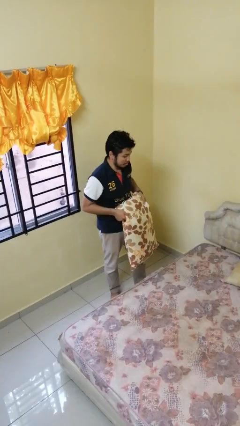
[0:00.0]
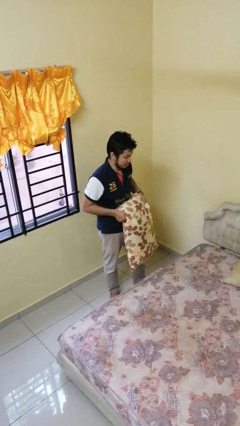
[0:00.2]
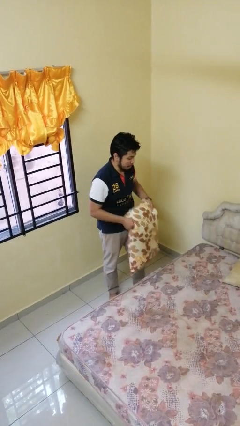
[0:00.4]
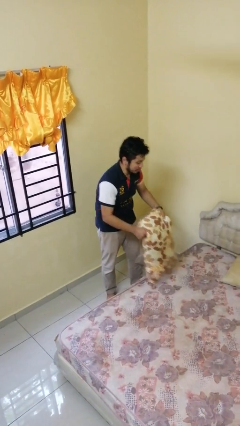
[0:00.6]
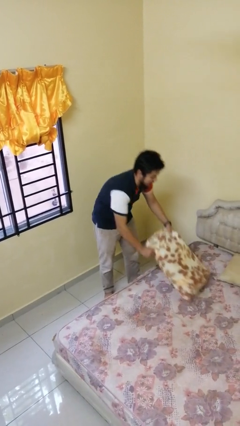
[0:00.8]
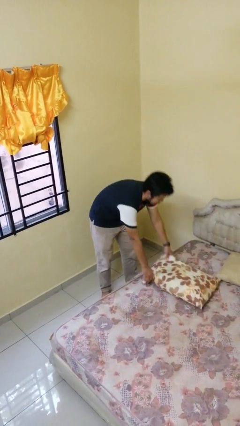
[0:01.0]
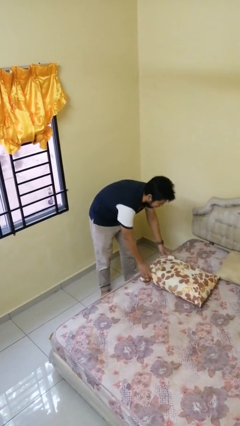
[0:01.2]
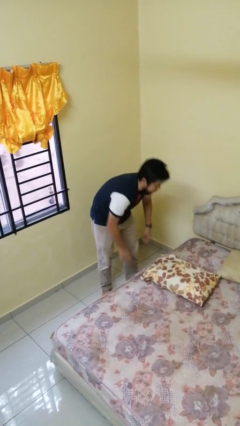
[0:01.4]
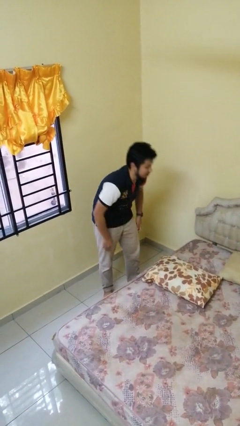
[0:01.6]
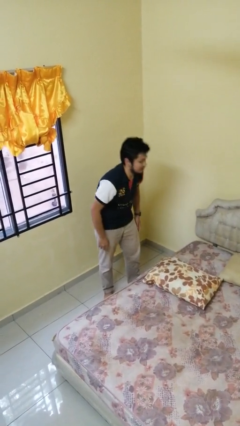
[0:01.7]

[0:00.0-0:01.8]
person puts down object on bed

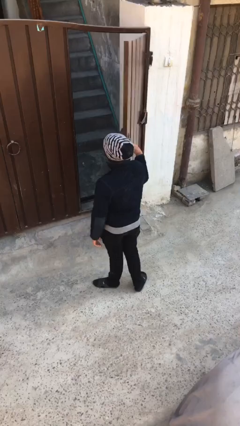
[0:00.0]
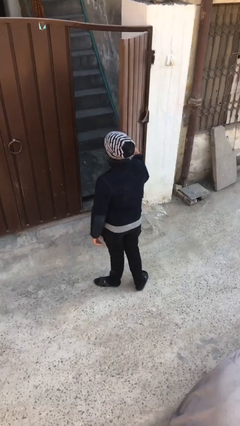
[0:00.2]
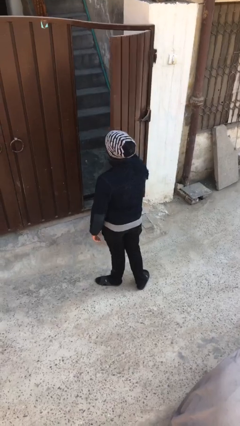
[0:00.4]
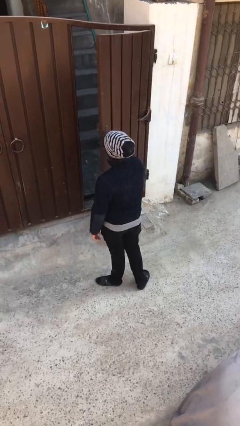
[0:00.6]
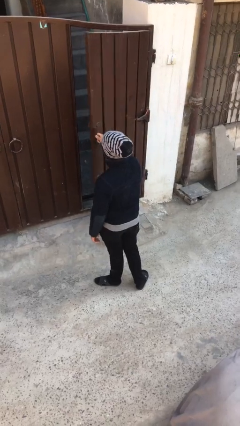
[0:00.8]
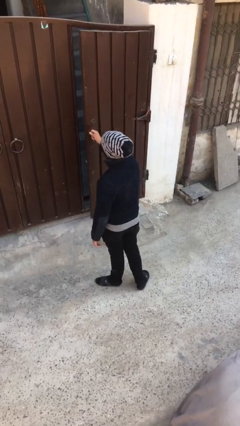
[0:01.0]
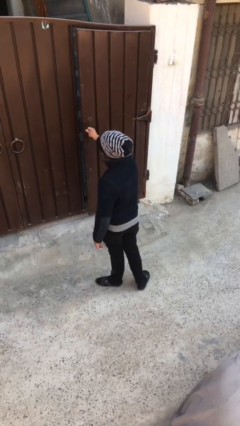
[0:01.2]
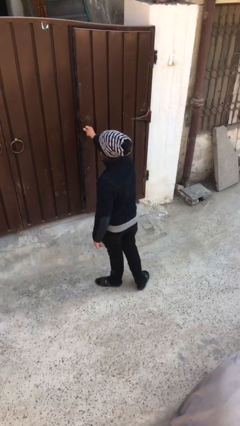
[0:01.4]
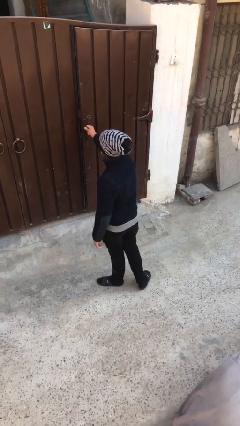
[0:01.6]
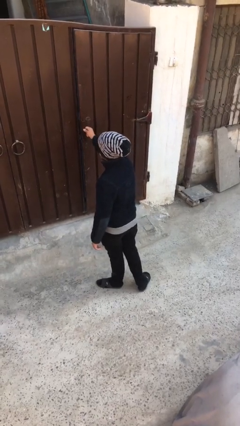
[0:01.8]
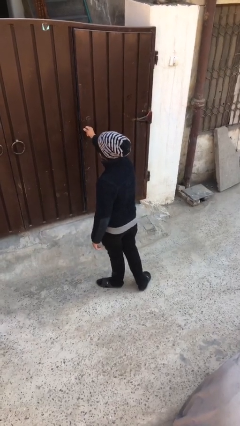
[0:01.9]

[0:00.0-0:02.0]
person closes facility door

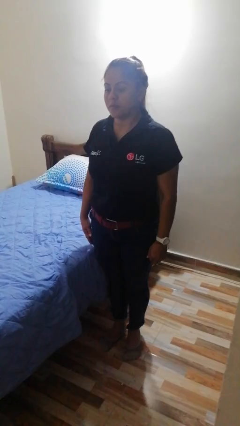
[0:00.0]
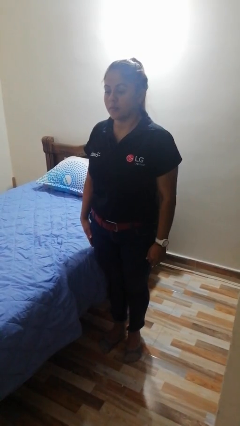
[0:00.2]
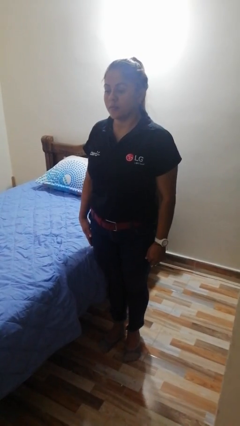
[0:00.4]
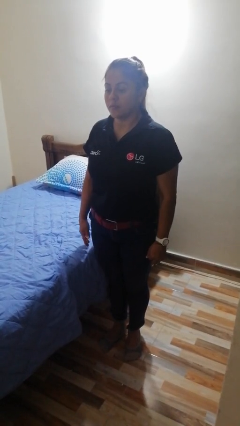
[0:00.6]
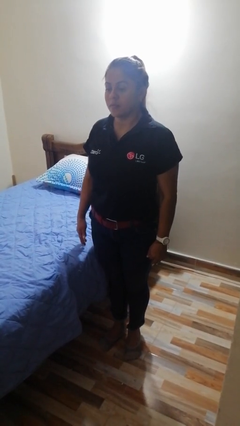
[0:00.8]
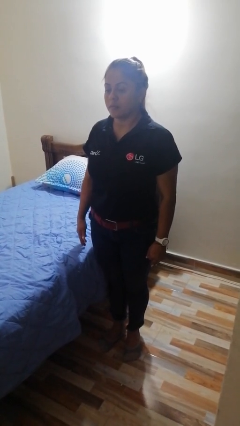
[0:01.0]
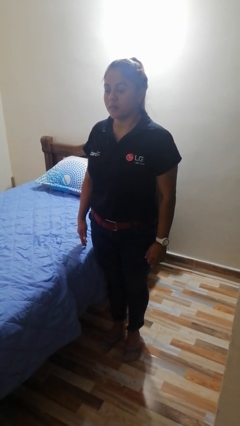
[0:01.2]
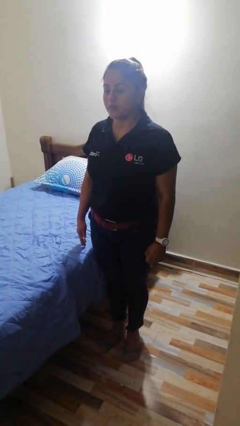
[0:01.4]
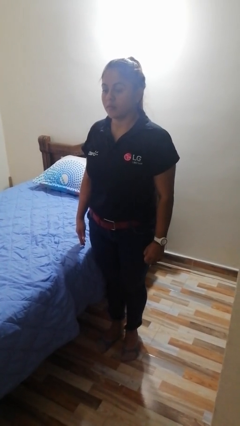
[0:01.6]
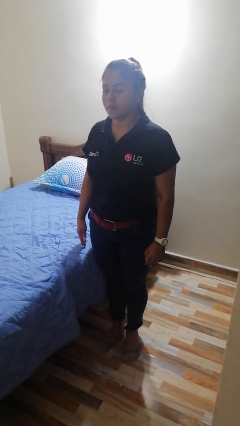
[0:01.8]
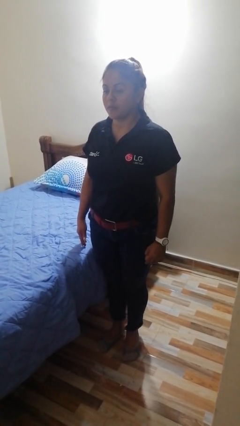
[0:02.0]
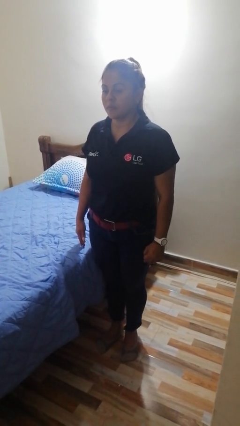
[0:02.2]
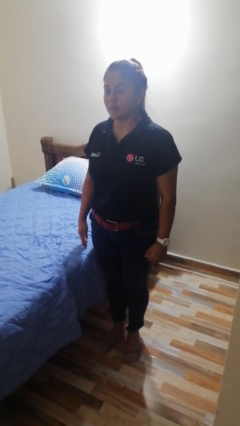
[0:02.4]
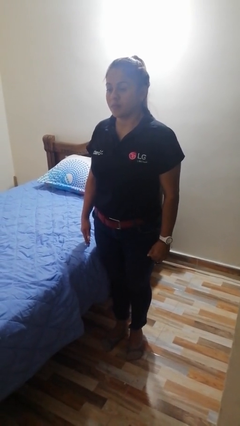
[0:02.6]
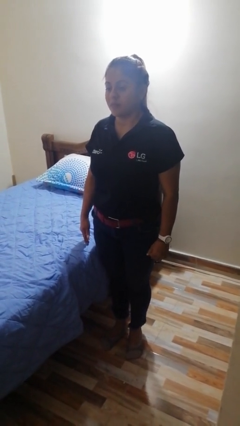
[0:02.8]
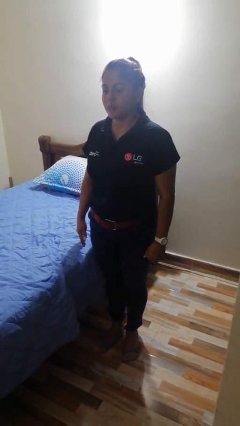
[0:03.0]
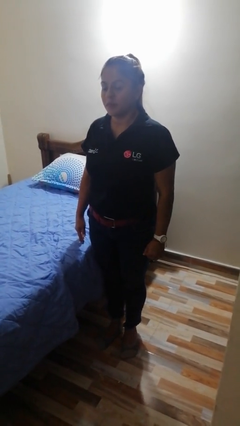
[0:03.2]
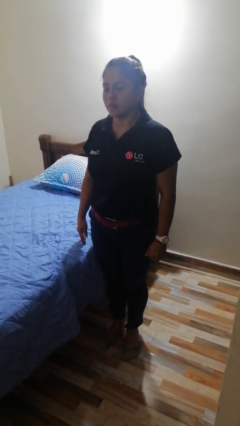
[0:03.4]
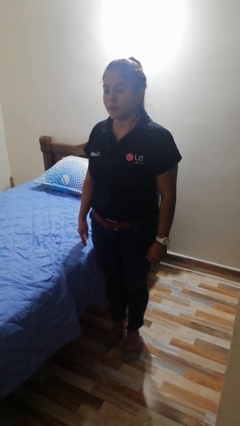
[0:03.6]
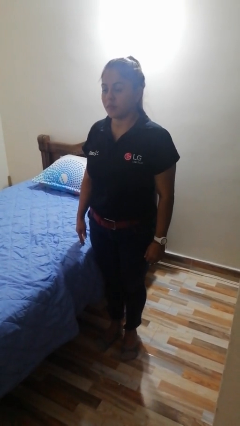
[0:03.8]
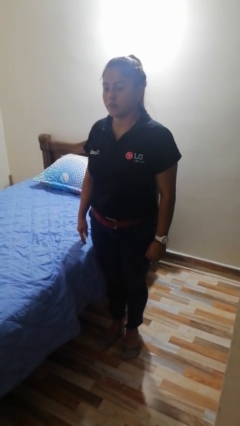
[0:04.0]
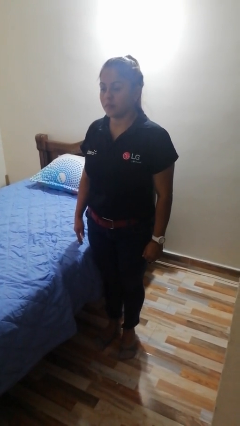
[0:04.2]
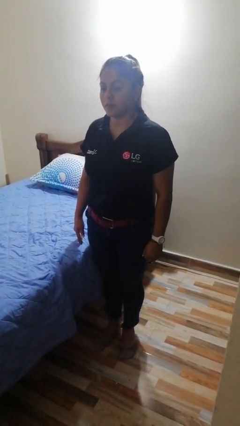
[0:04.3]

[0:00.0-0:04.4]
person stands up

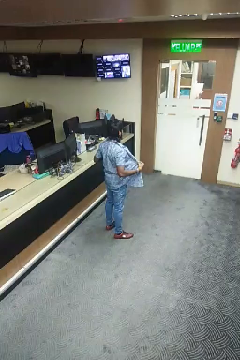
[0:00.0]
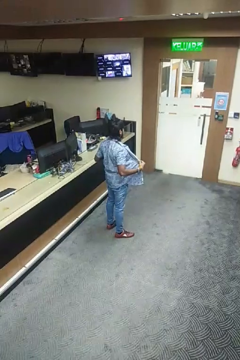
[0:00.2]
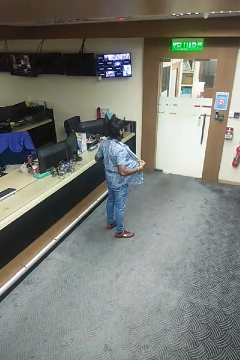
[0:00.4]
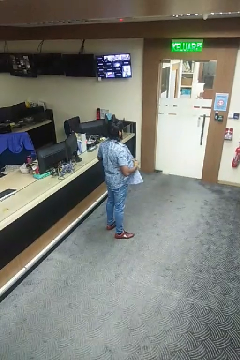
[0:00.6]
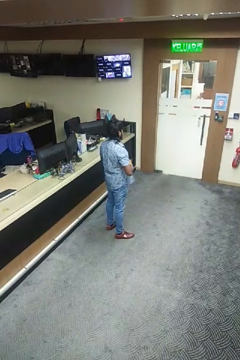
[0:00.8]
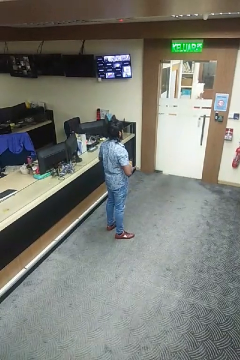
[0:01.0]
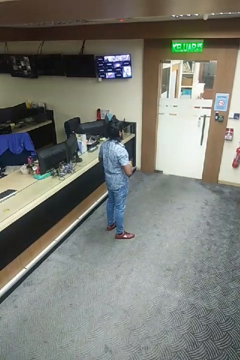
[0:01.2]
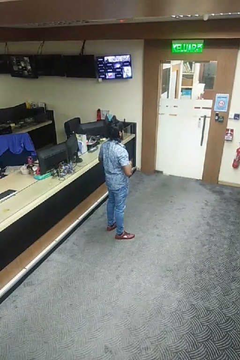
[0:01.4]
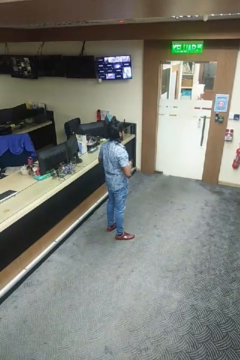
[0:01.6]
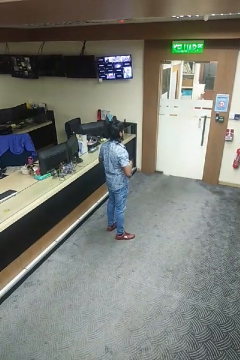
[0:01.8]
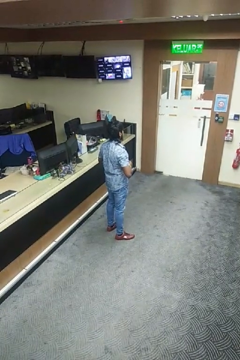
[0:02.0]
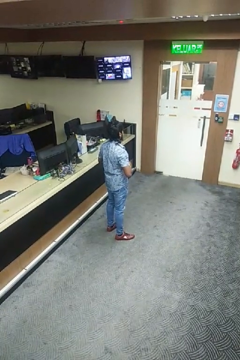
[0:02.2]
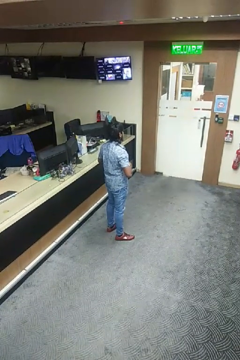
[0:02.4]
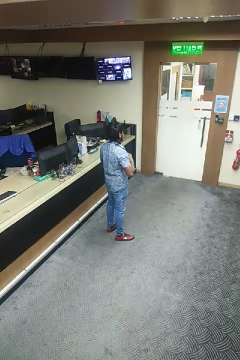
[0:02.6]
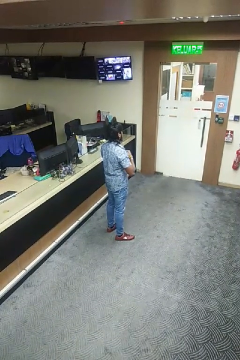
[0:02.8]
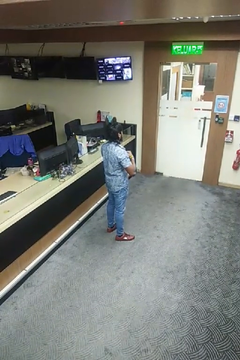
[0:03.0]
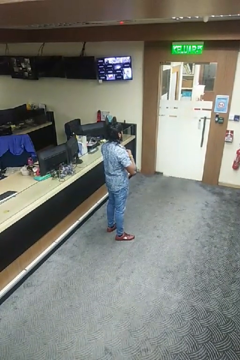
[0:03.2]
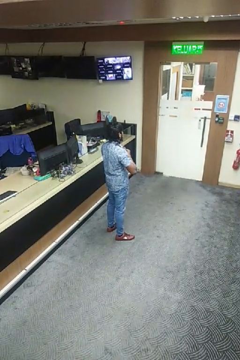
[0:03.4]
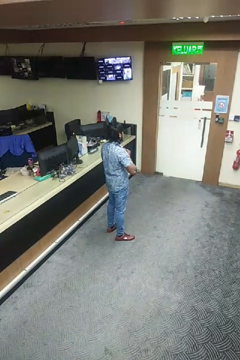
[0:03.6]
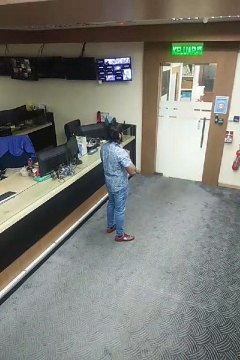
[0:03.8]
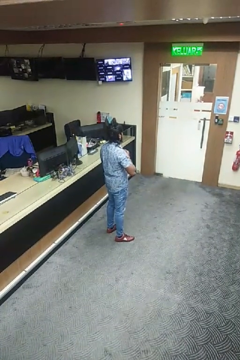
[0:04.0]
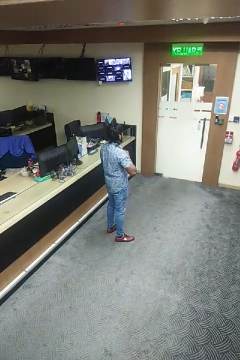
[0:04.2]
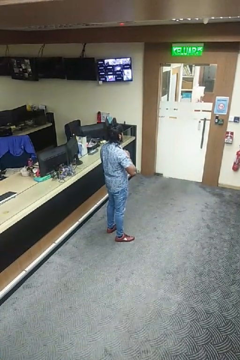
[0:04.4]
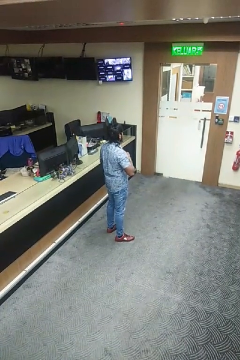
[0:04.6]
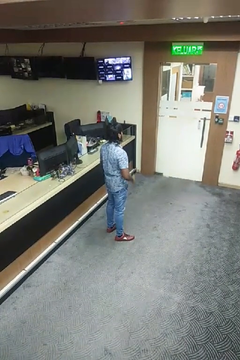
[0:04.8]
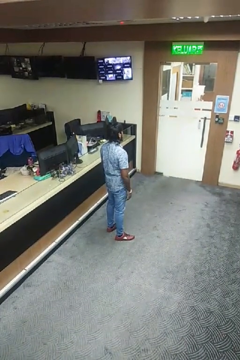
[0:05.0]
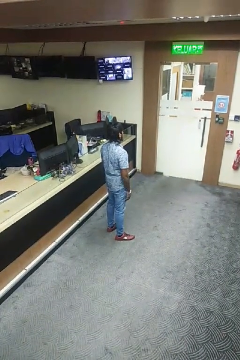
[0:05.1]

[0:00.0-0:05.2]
person buttons shirt

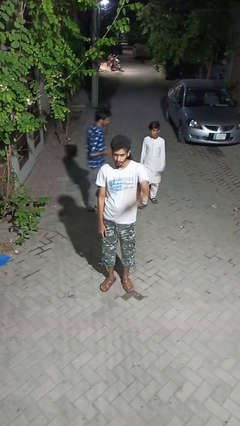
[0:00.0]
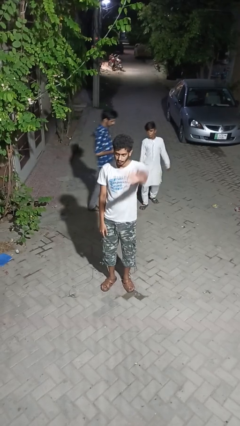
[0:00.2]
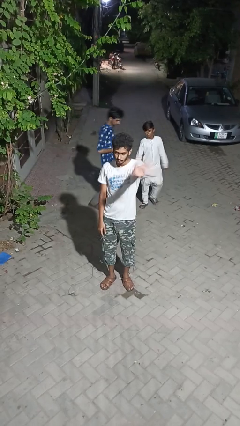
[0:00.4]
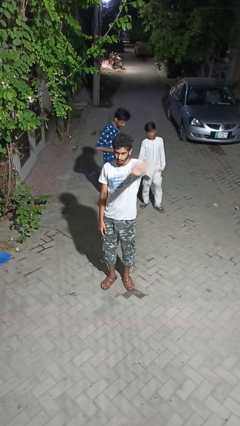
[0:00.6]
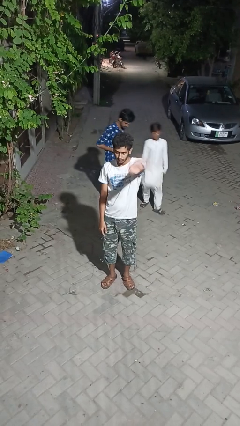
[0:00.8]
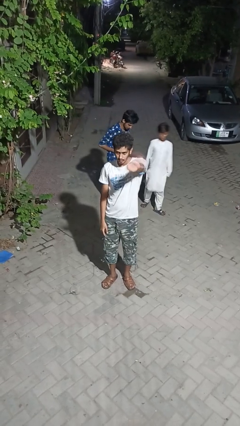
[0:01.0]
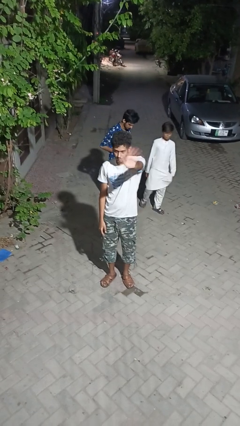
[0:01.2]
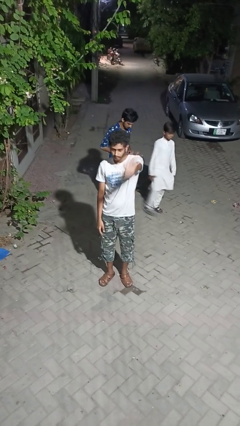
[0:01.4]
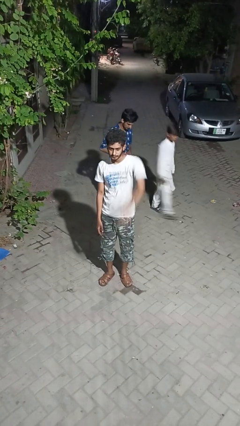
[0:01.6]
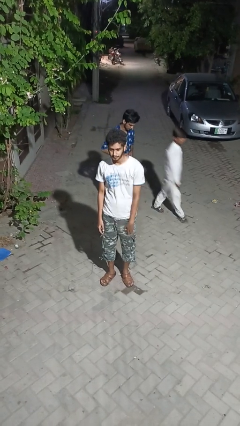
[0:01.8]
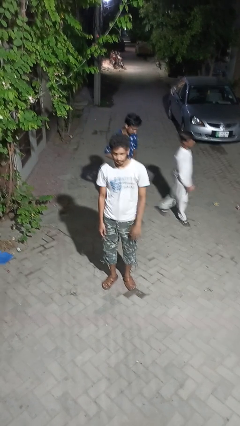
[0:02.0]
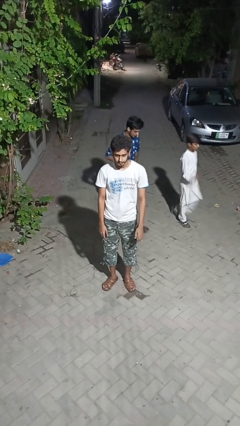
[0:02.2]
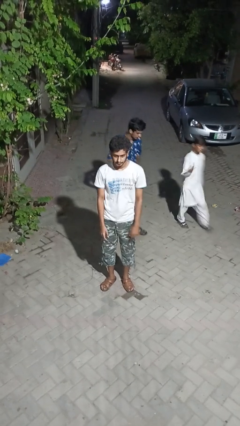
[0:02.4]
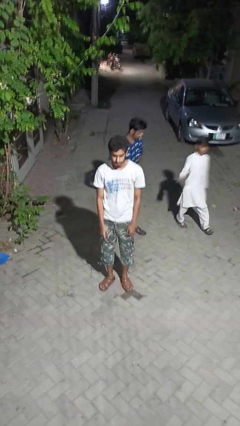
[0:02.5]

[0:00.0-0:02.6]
person waves at person

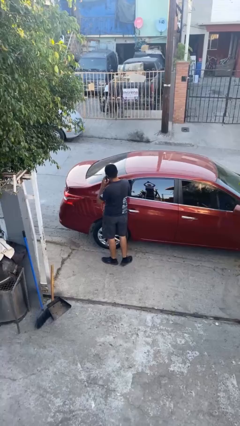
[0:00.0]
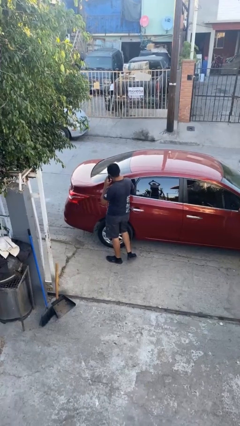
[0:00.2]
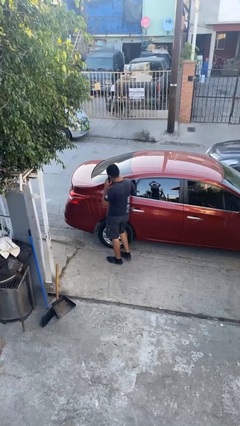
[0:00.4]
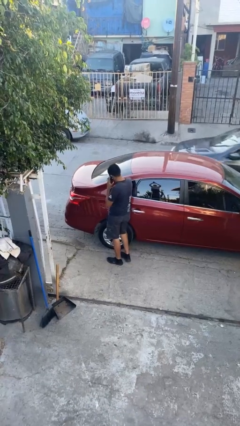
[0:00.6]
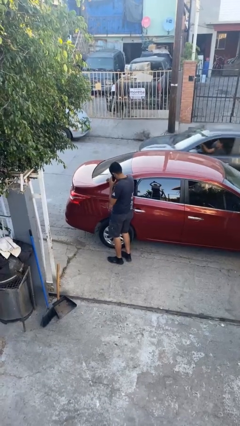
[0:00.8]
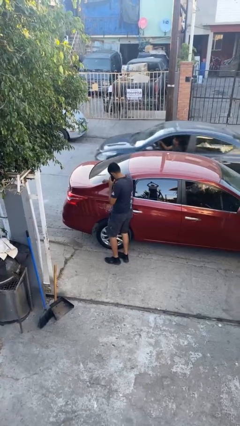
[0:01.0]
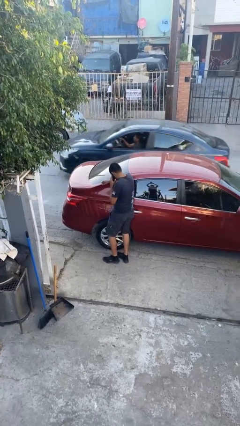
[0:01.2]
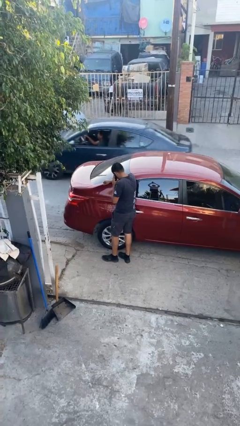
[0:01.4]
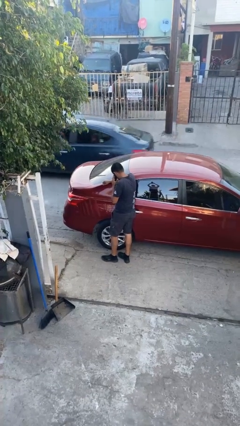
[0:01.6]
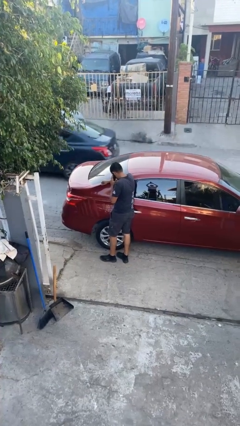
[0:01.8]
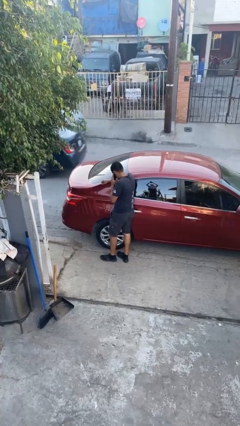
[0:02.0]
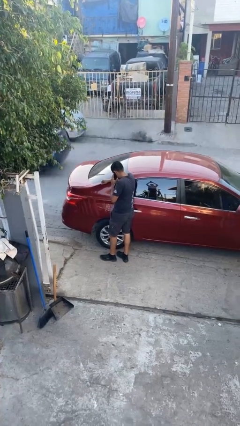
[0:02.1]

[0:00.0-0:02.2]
person leans against car
